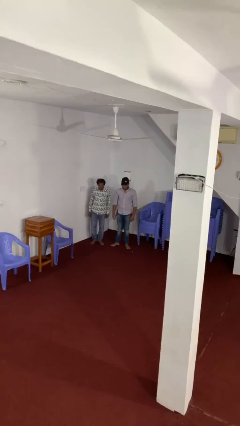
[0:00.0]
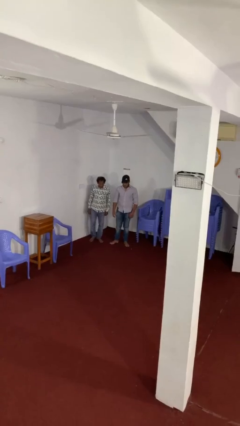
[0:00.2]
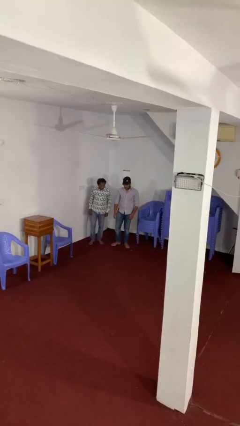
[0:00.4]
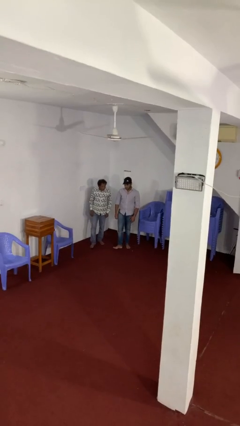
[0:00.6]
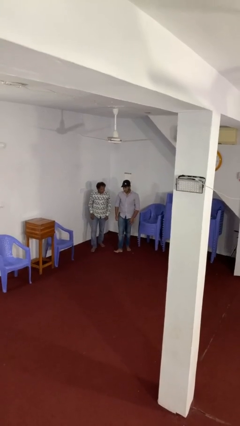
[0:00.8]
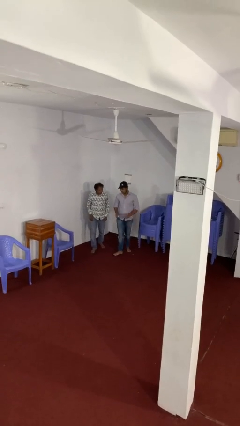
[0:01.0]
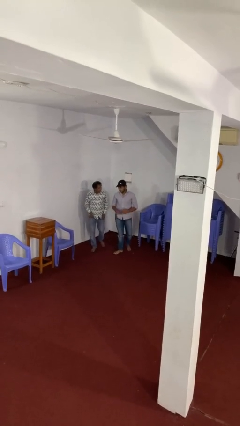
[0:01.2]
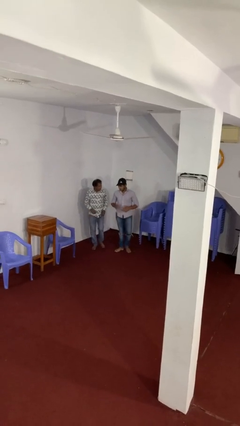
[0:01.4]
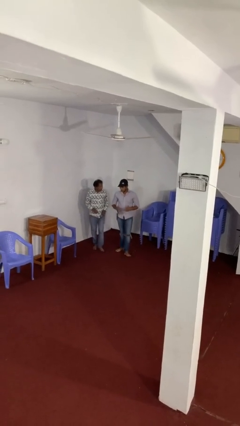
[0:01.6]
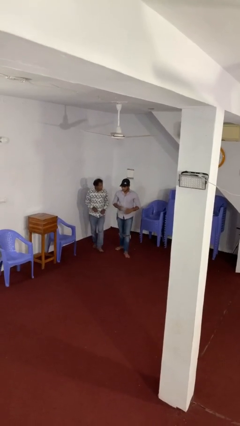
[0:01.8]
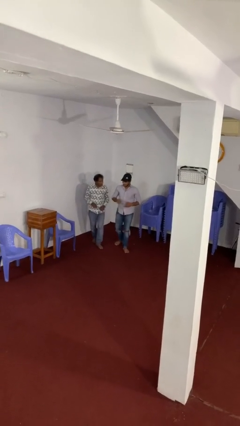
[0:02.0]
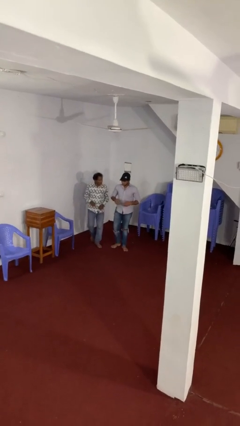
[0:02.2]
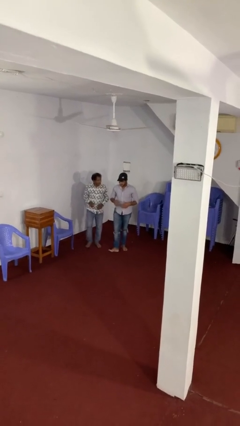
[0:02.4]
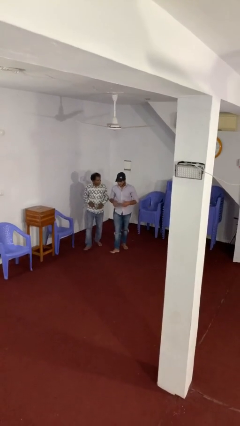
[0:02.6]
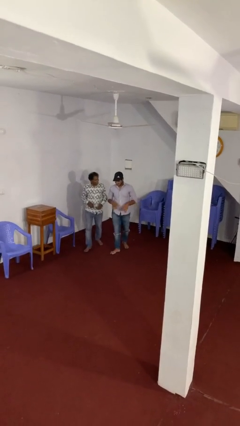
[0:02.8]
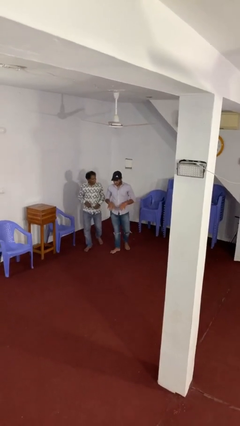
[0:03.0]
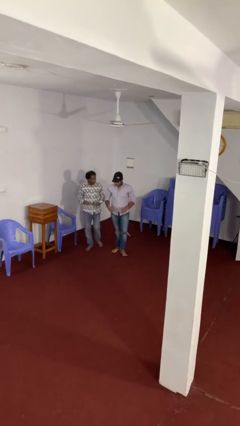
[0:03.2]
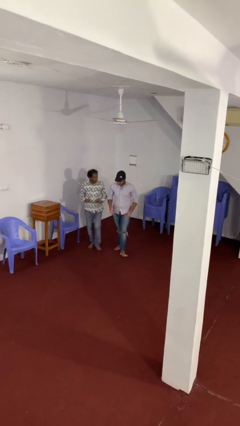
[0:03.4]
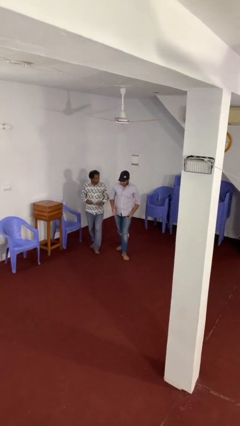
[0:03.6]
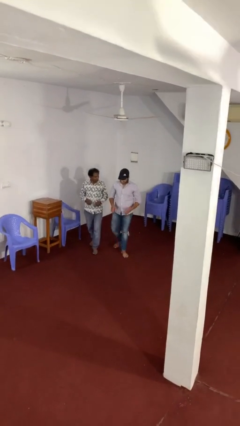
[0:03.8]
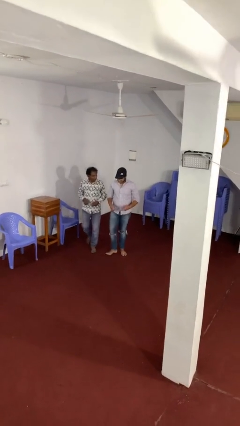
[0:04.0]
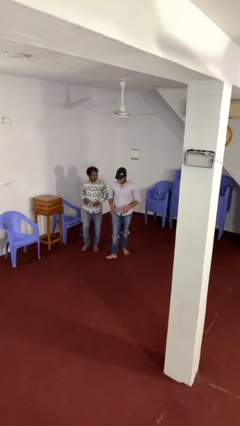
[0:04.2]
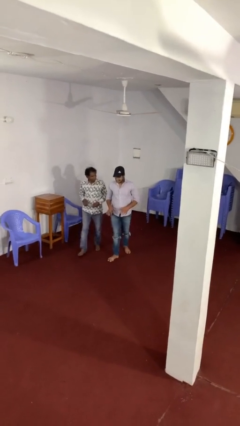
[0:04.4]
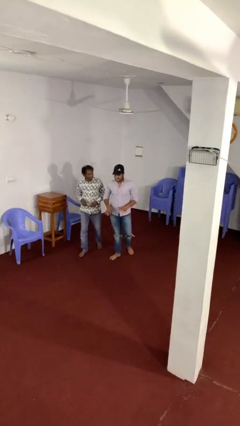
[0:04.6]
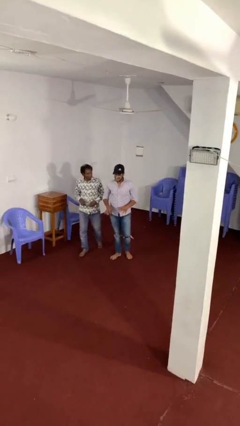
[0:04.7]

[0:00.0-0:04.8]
person talks to person

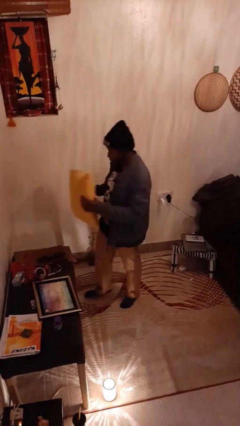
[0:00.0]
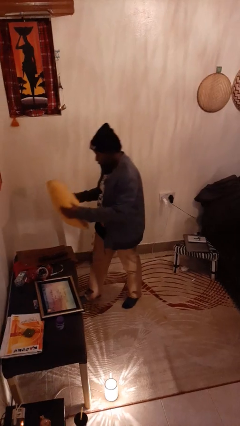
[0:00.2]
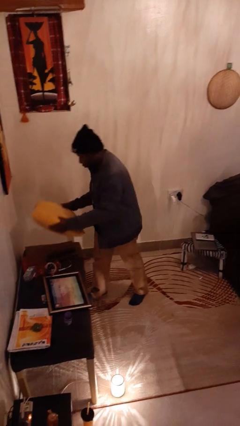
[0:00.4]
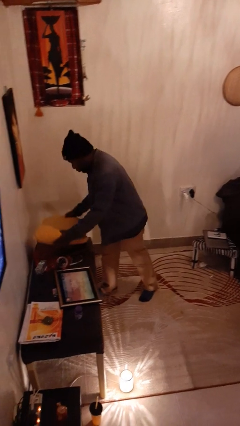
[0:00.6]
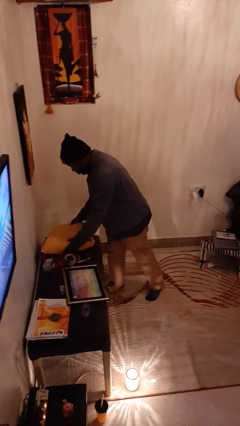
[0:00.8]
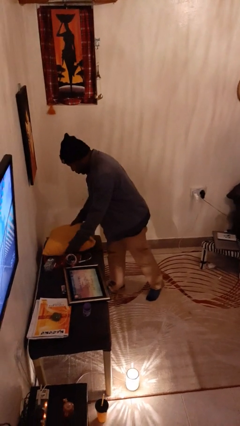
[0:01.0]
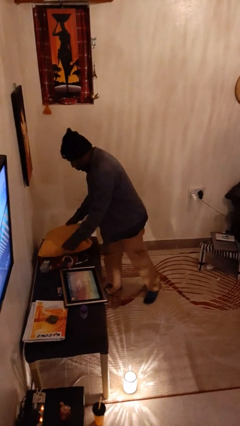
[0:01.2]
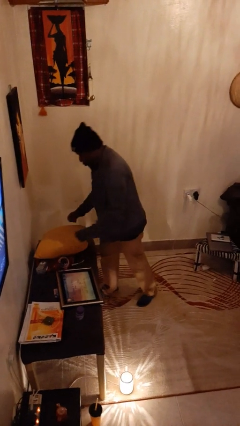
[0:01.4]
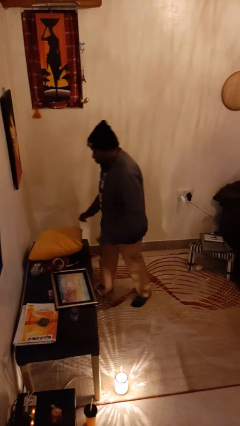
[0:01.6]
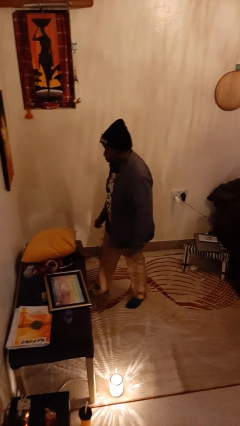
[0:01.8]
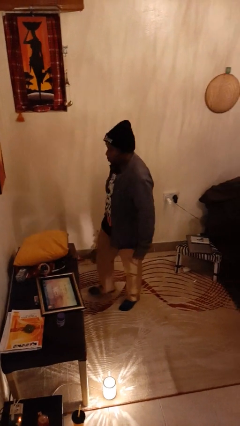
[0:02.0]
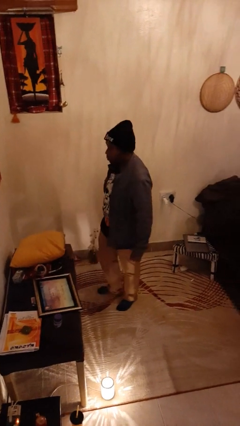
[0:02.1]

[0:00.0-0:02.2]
person puts down object on countertop

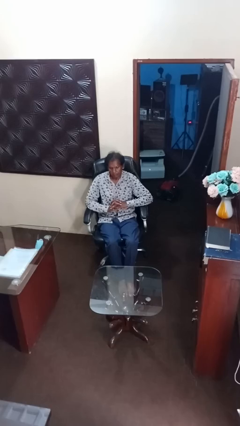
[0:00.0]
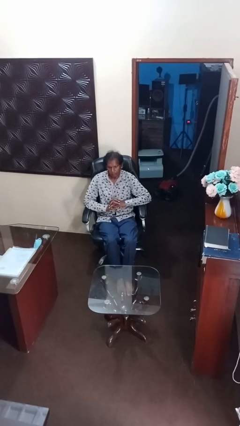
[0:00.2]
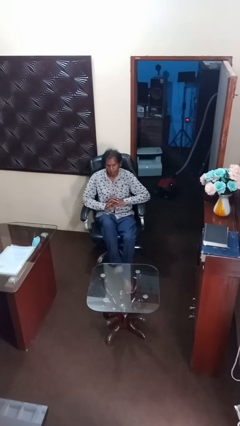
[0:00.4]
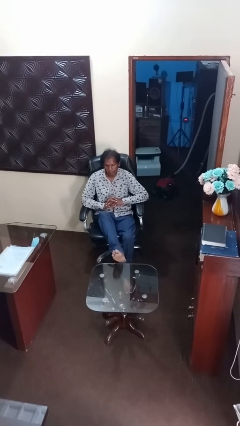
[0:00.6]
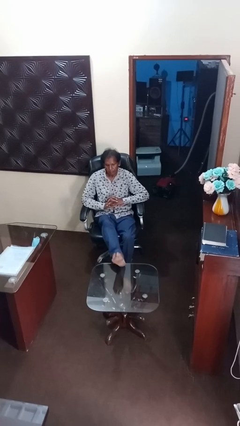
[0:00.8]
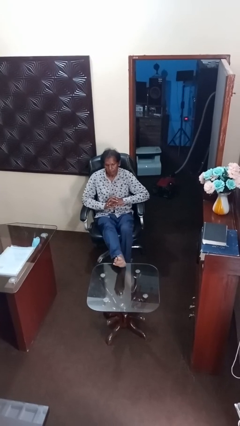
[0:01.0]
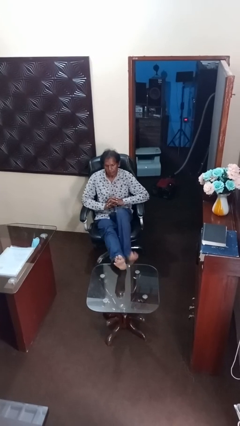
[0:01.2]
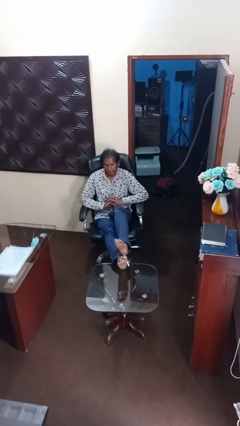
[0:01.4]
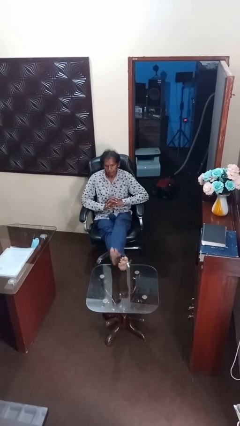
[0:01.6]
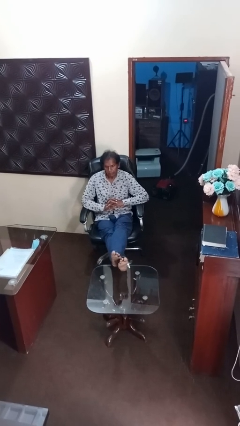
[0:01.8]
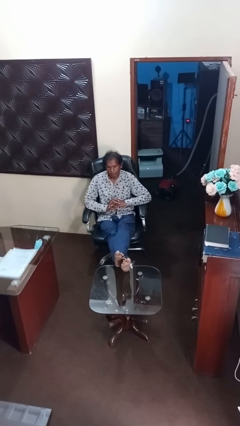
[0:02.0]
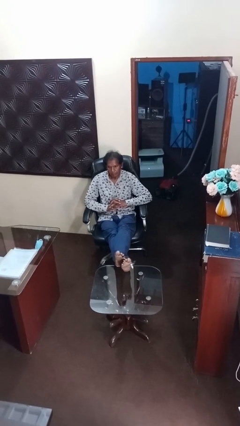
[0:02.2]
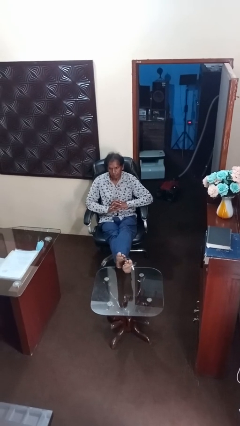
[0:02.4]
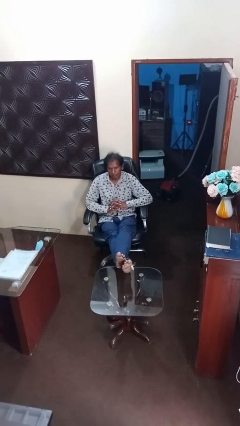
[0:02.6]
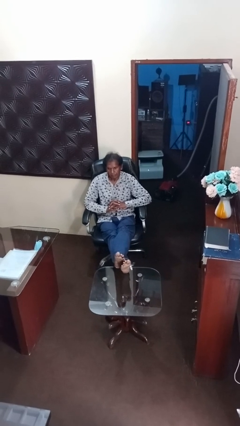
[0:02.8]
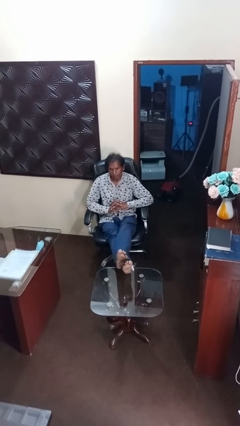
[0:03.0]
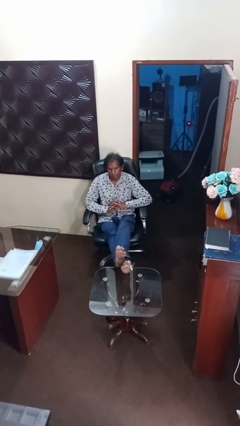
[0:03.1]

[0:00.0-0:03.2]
person puts feet up

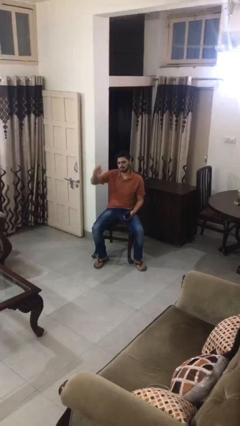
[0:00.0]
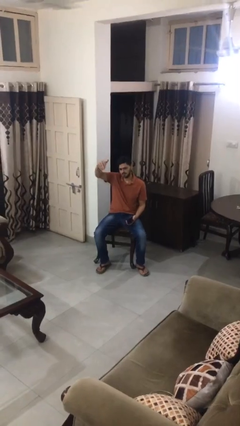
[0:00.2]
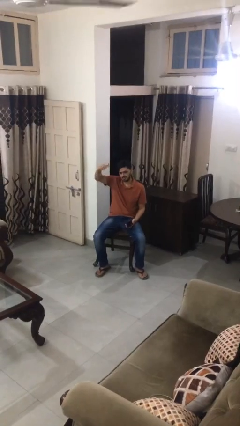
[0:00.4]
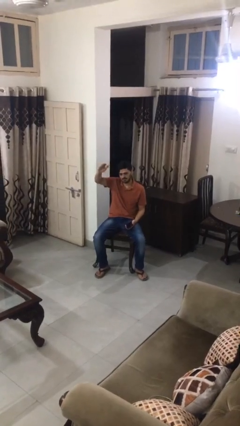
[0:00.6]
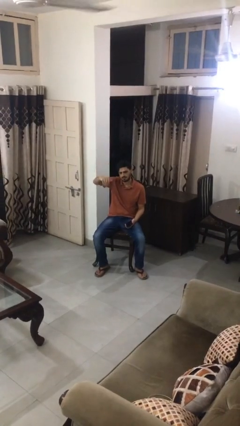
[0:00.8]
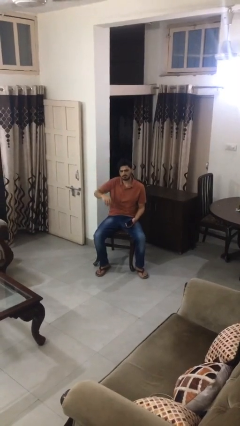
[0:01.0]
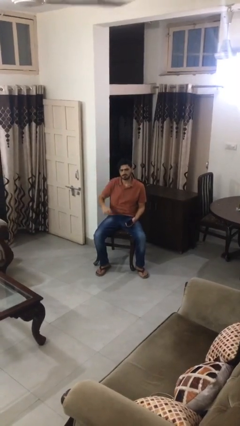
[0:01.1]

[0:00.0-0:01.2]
person gestures come here

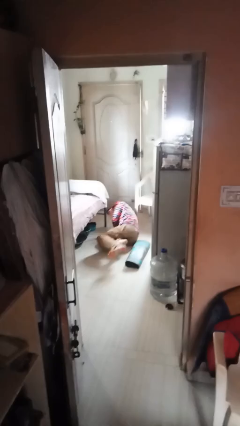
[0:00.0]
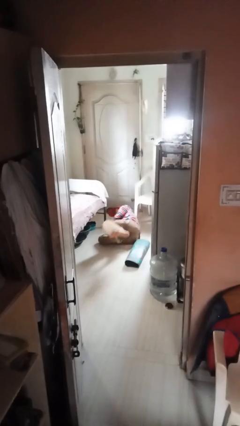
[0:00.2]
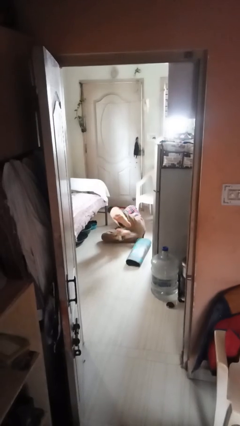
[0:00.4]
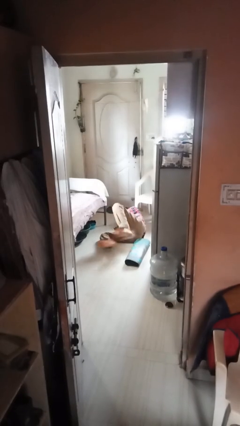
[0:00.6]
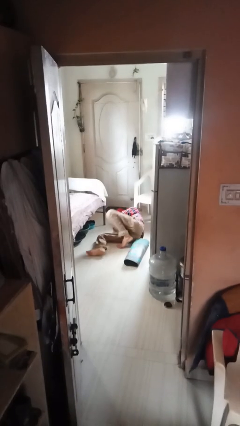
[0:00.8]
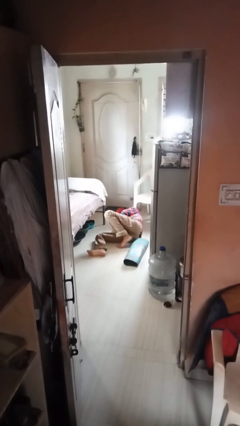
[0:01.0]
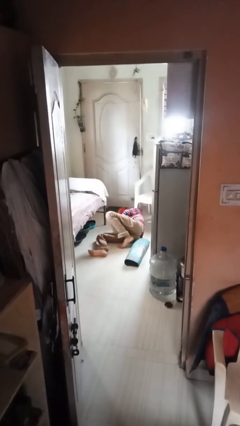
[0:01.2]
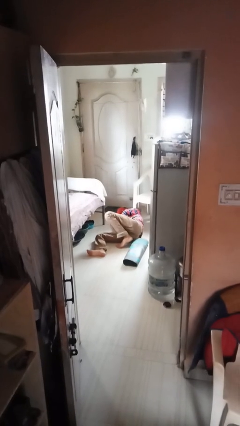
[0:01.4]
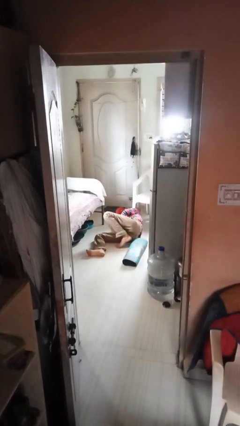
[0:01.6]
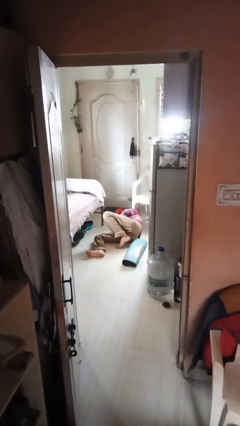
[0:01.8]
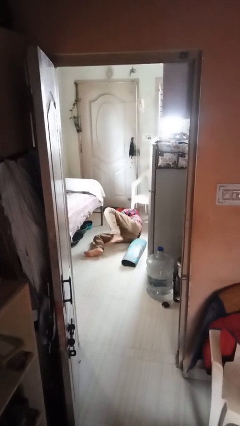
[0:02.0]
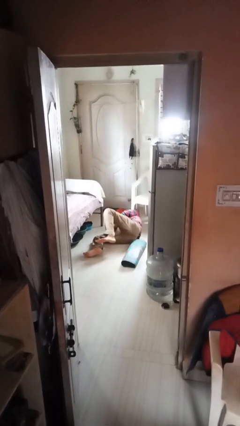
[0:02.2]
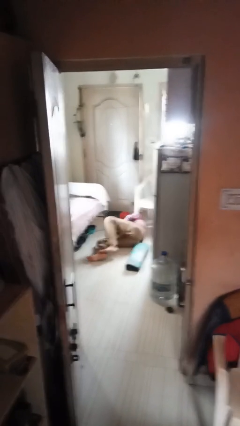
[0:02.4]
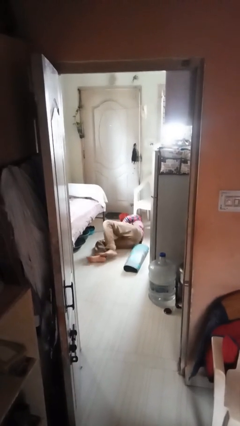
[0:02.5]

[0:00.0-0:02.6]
person lies down on floor

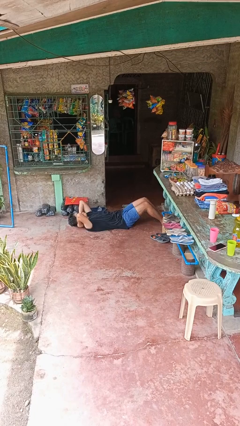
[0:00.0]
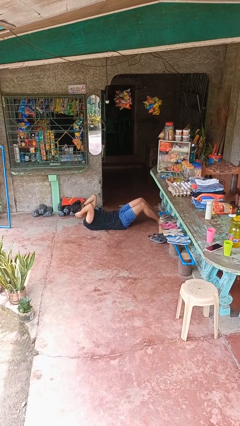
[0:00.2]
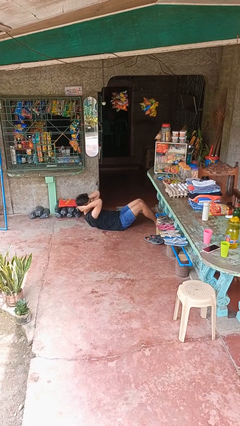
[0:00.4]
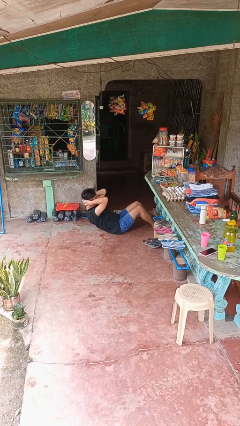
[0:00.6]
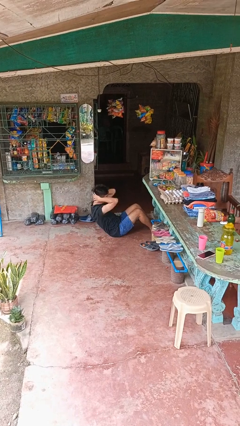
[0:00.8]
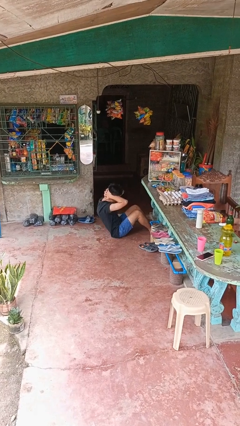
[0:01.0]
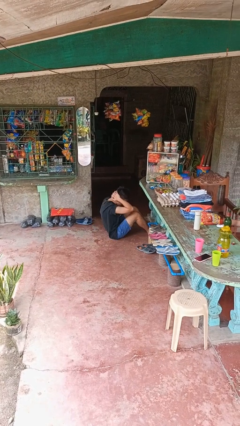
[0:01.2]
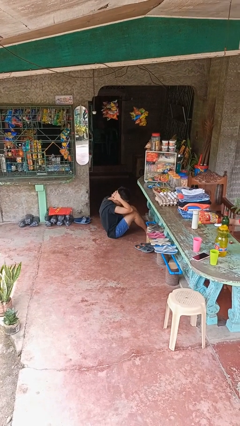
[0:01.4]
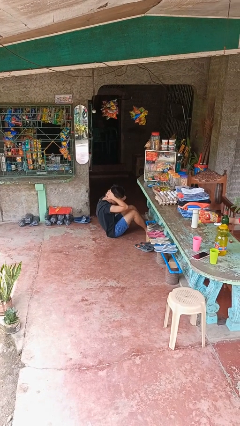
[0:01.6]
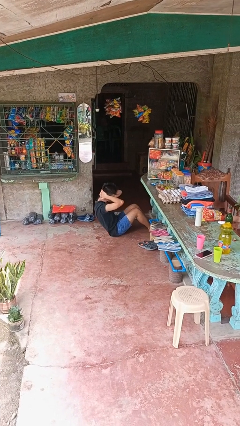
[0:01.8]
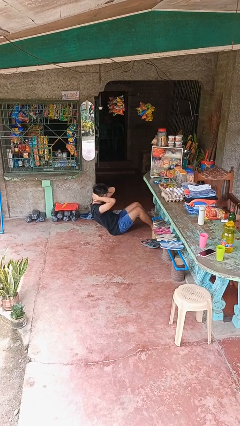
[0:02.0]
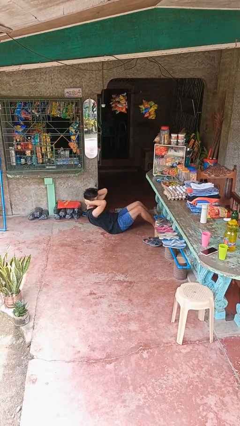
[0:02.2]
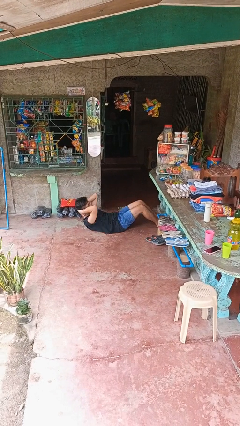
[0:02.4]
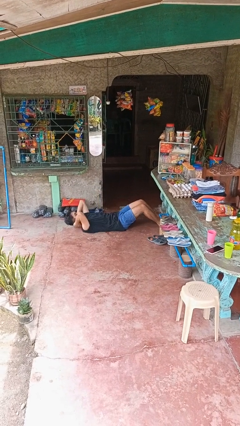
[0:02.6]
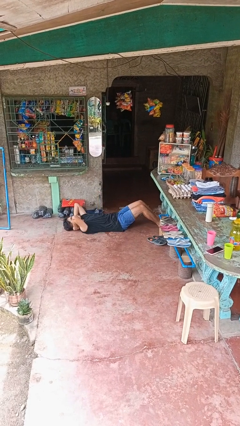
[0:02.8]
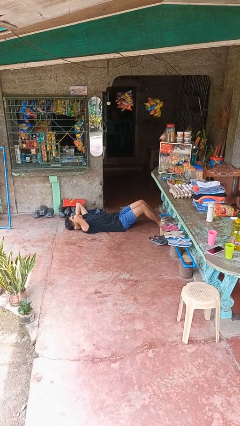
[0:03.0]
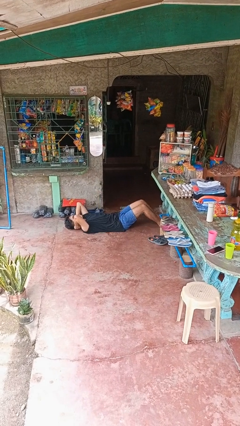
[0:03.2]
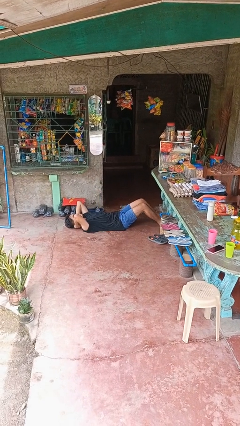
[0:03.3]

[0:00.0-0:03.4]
person exercises with situp
